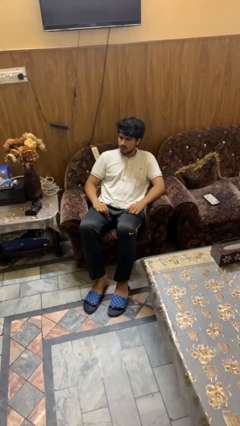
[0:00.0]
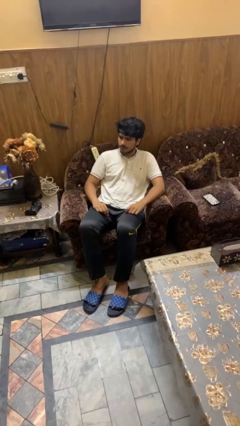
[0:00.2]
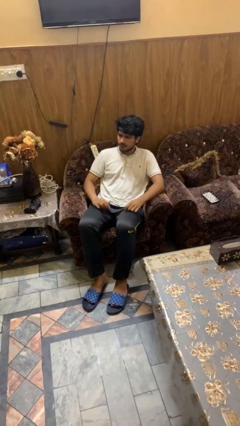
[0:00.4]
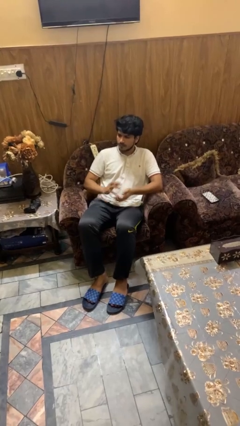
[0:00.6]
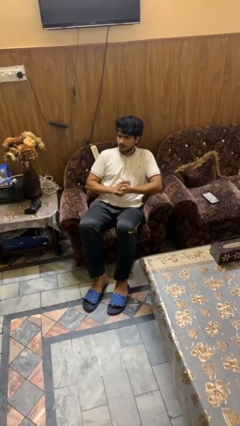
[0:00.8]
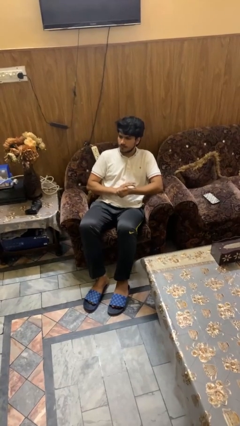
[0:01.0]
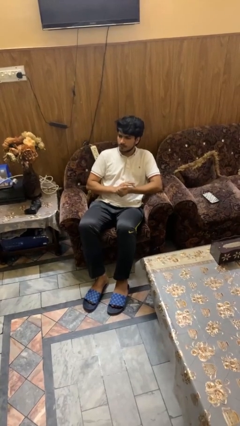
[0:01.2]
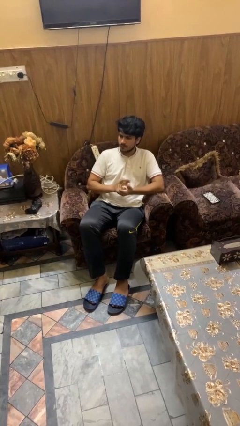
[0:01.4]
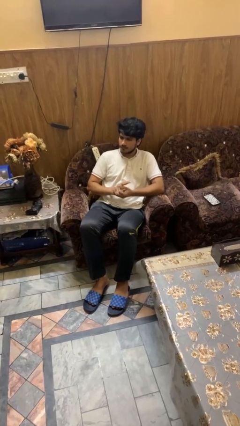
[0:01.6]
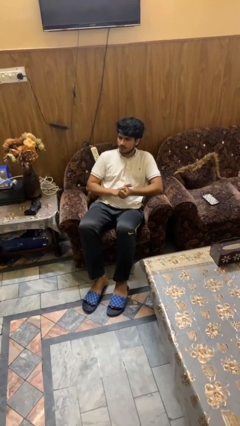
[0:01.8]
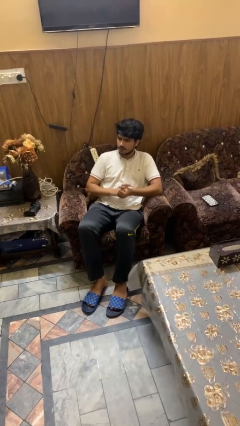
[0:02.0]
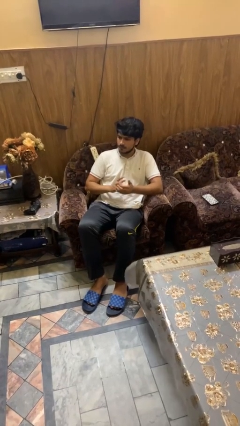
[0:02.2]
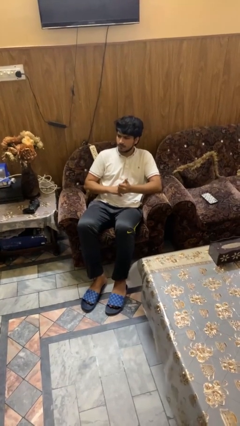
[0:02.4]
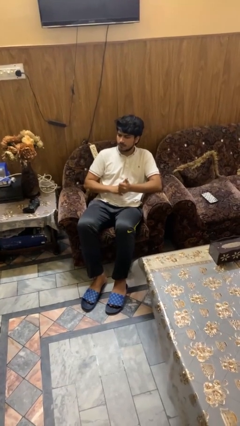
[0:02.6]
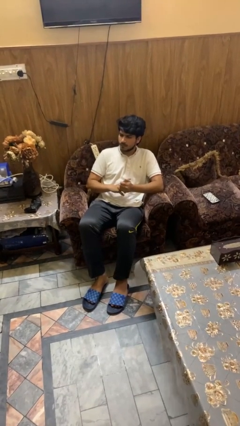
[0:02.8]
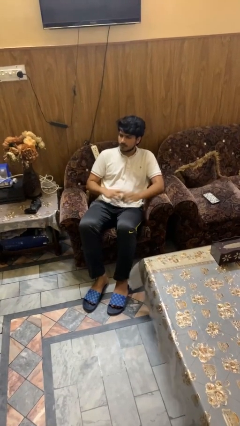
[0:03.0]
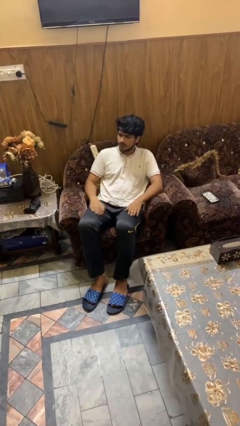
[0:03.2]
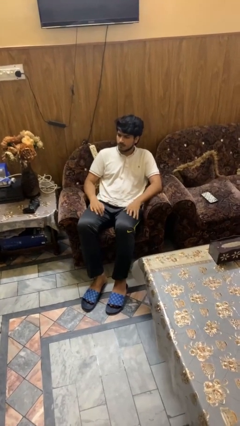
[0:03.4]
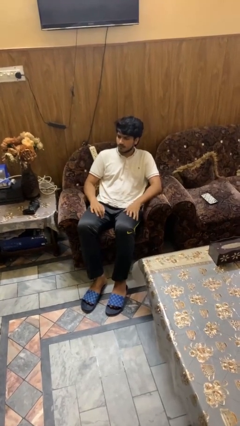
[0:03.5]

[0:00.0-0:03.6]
person cracks knuckles

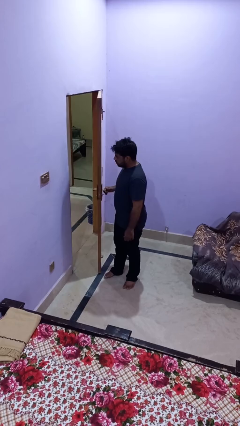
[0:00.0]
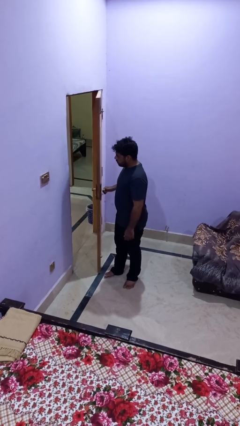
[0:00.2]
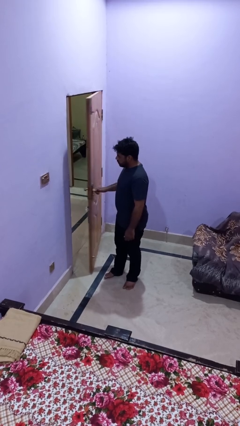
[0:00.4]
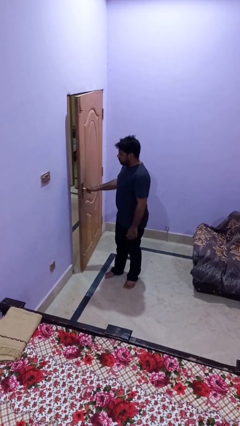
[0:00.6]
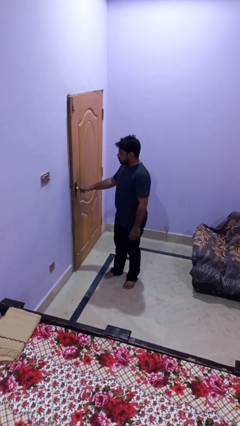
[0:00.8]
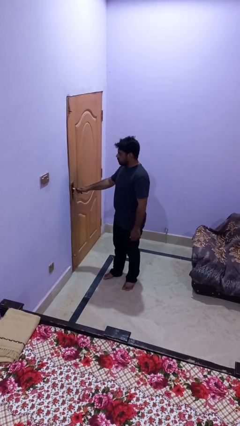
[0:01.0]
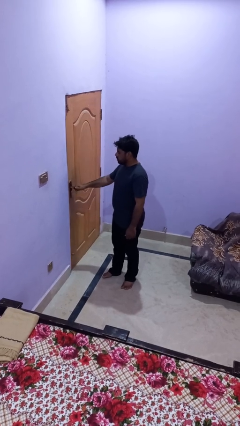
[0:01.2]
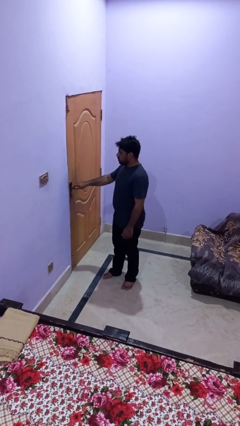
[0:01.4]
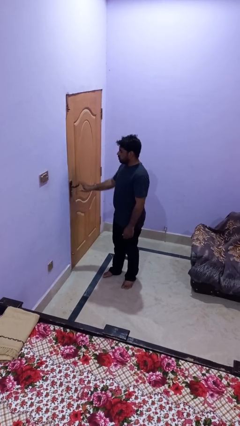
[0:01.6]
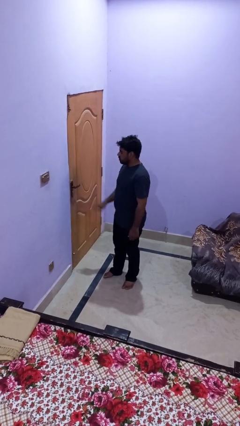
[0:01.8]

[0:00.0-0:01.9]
person closes facility door

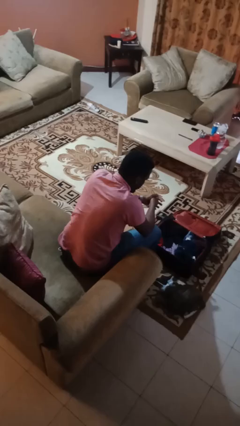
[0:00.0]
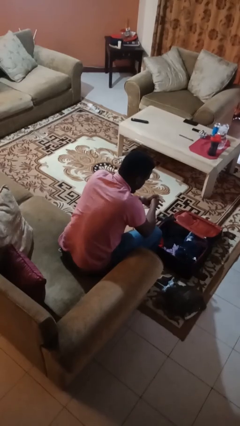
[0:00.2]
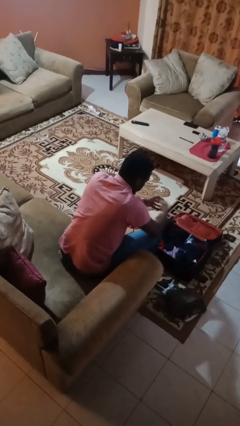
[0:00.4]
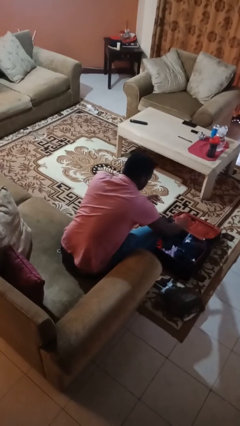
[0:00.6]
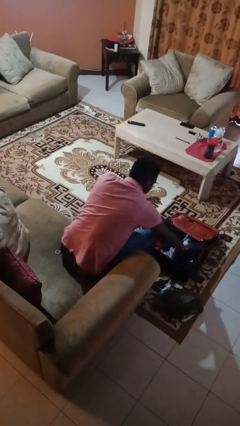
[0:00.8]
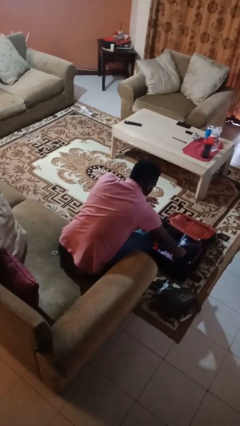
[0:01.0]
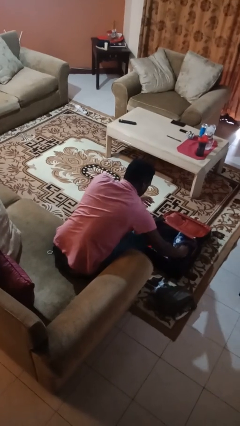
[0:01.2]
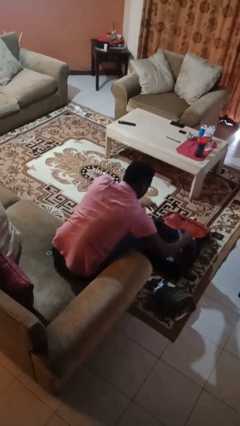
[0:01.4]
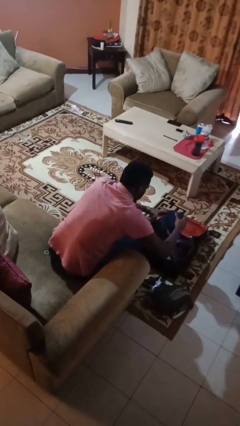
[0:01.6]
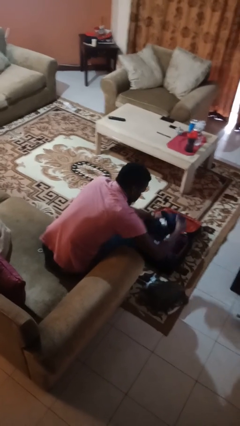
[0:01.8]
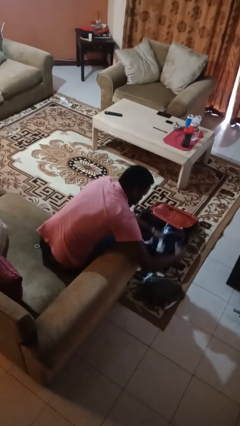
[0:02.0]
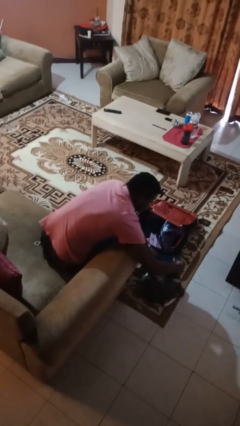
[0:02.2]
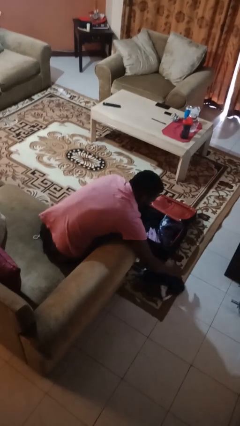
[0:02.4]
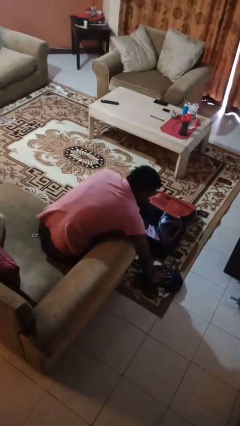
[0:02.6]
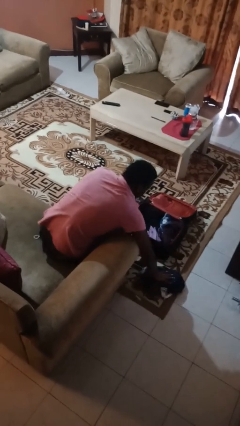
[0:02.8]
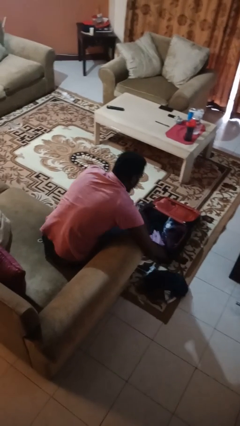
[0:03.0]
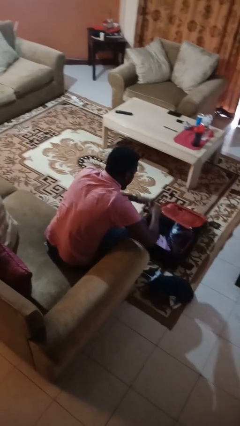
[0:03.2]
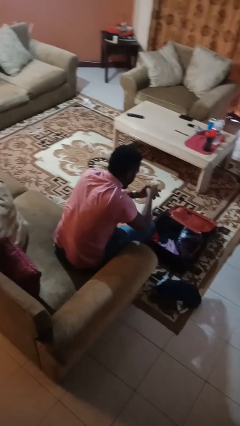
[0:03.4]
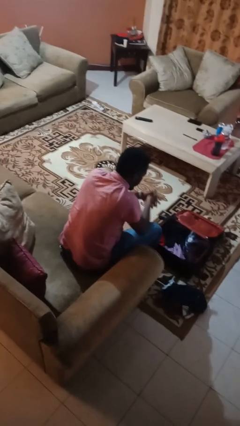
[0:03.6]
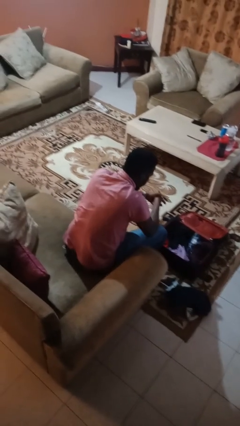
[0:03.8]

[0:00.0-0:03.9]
person unloads clothes from suitcase

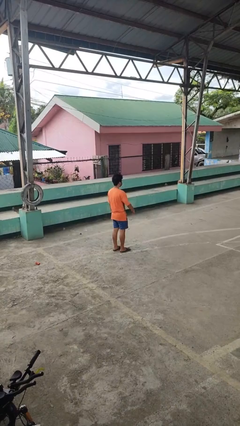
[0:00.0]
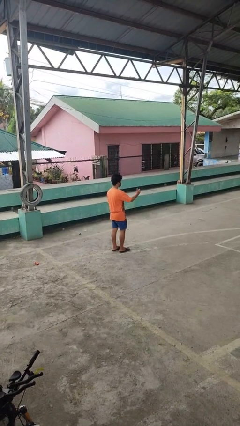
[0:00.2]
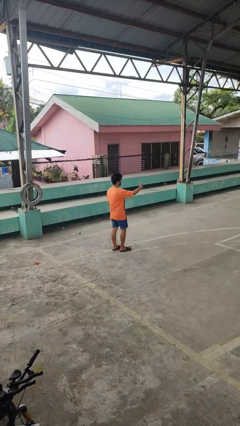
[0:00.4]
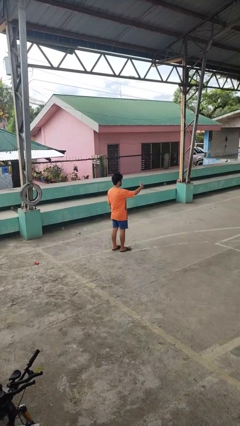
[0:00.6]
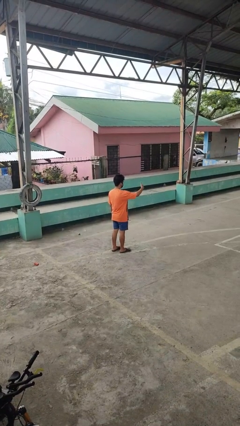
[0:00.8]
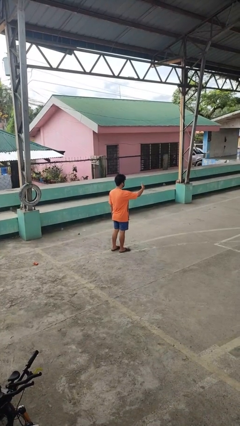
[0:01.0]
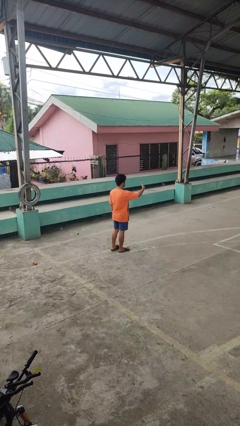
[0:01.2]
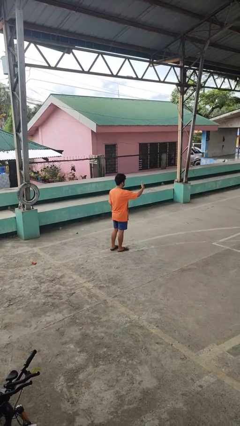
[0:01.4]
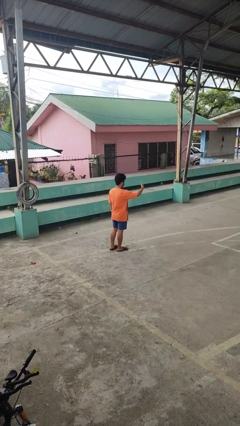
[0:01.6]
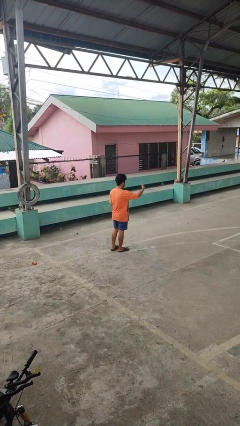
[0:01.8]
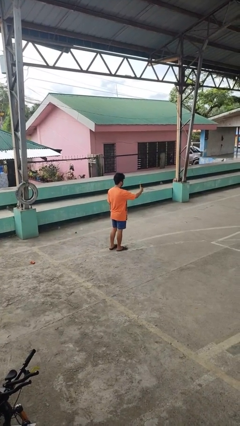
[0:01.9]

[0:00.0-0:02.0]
person gestures thumbs up

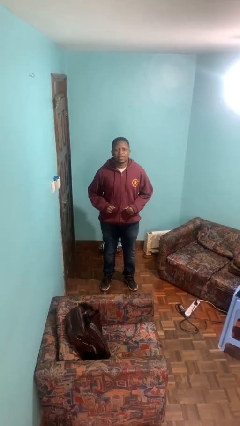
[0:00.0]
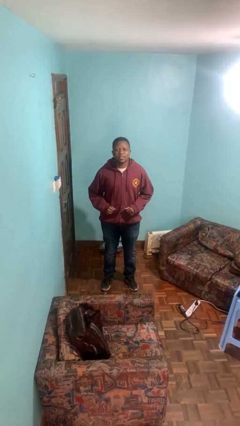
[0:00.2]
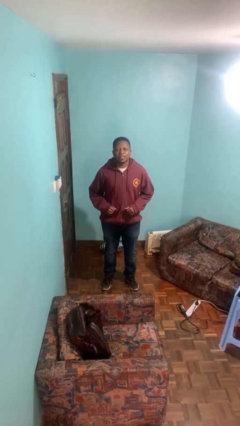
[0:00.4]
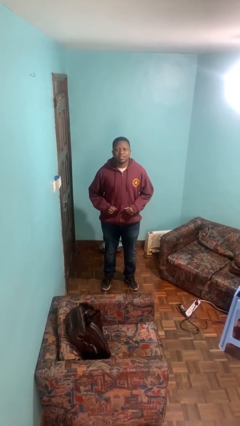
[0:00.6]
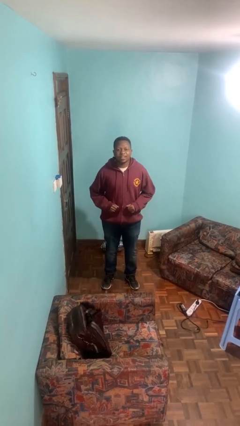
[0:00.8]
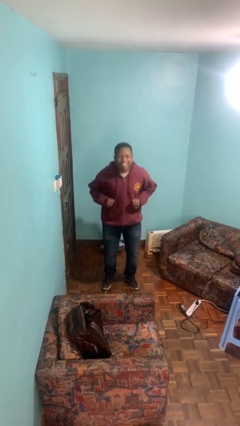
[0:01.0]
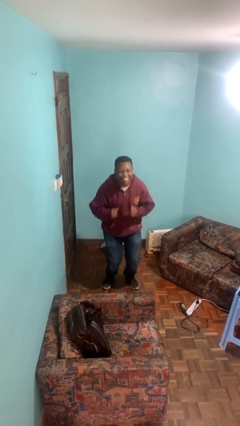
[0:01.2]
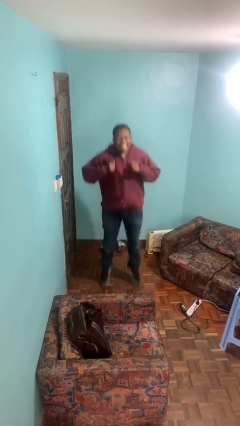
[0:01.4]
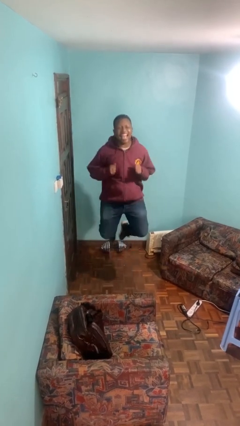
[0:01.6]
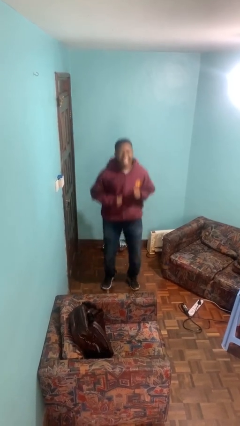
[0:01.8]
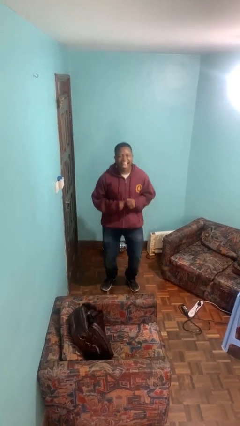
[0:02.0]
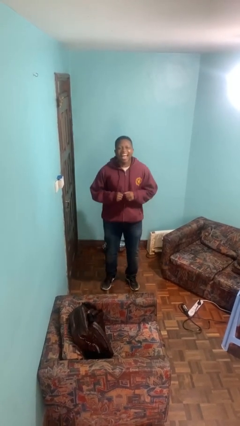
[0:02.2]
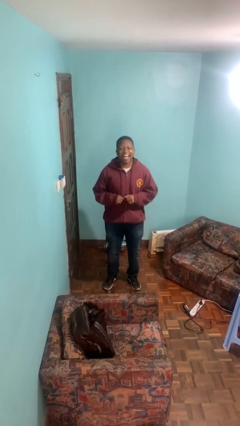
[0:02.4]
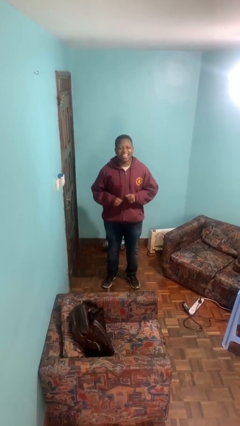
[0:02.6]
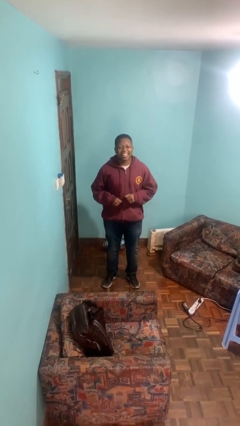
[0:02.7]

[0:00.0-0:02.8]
person jumps

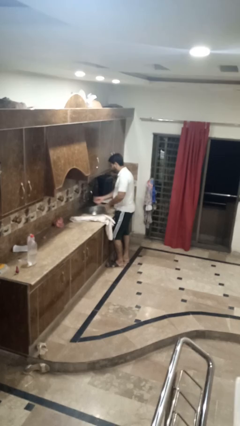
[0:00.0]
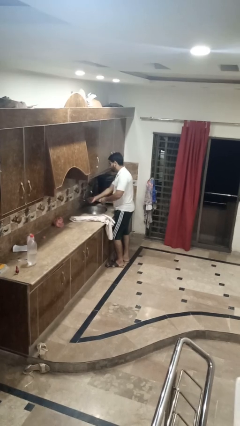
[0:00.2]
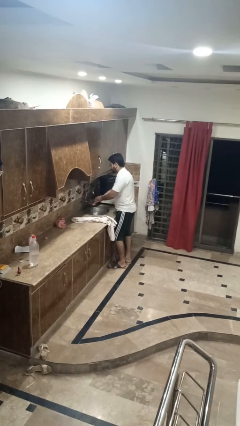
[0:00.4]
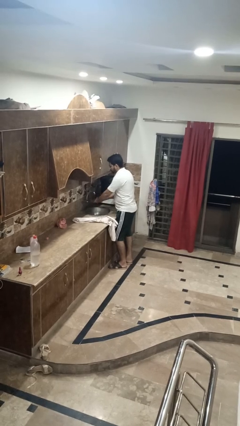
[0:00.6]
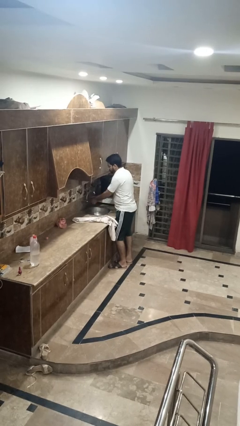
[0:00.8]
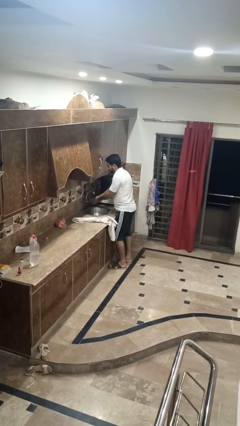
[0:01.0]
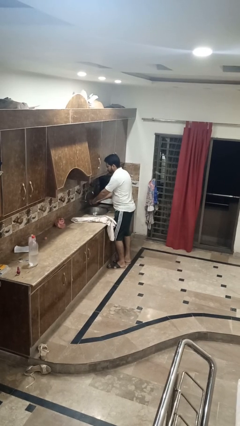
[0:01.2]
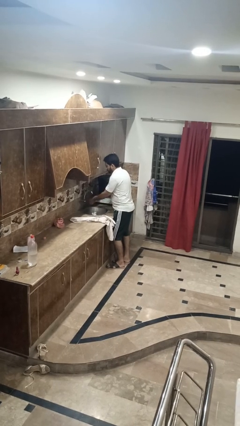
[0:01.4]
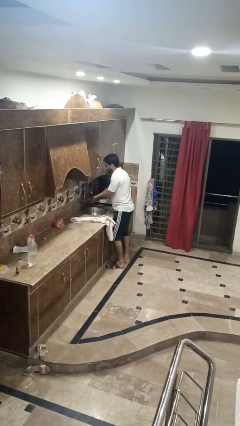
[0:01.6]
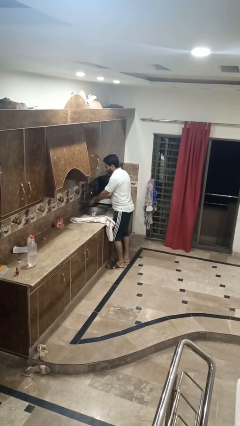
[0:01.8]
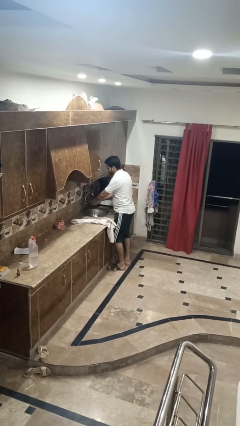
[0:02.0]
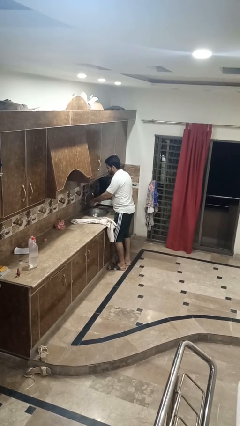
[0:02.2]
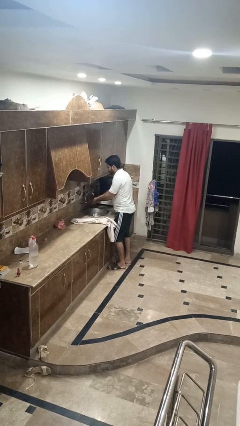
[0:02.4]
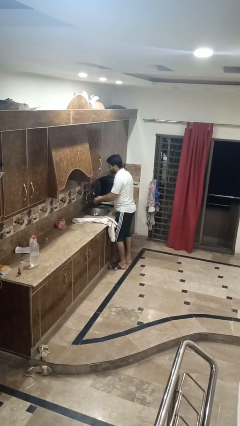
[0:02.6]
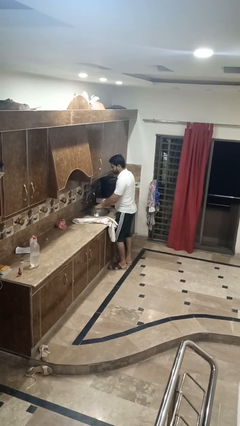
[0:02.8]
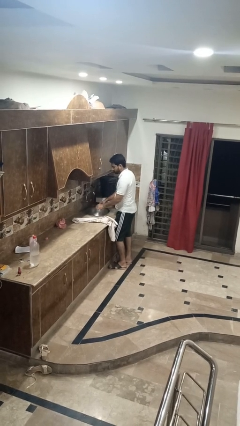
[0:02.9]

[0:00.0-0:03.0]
person washes hands

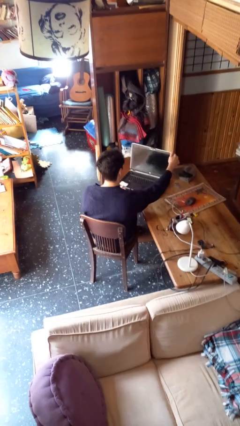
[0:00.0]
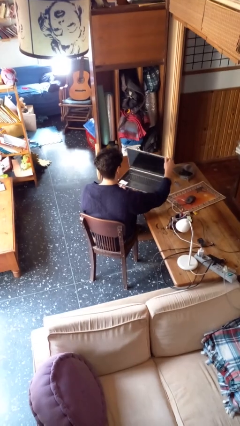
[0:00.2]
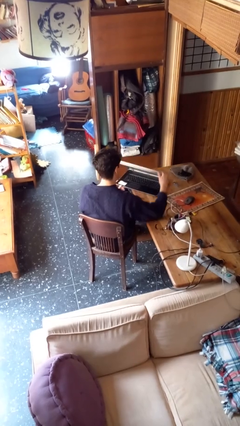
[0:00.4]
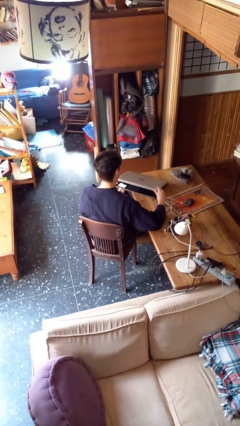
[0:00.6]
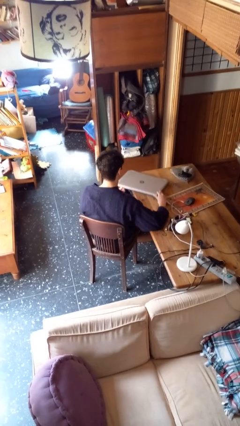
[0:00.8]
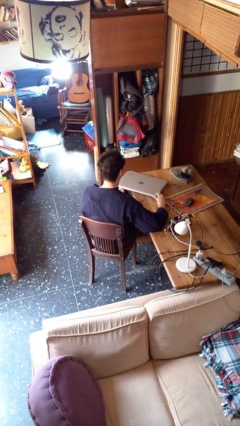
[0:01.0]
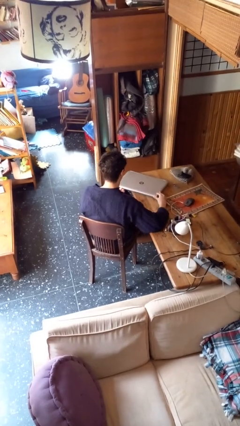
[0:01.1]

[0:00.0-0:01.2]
person closes laptop
